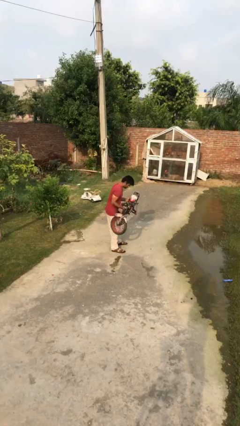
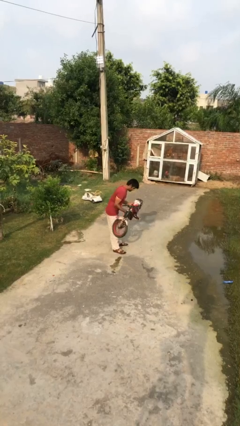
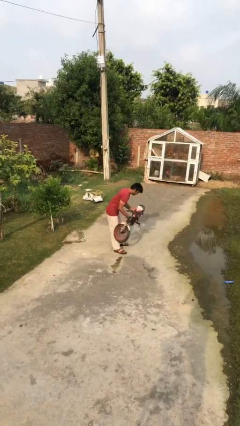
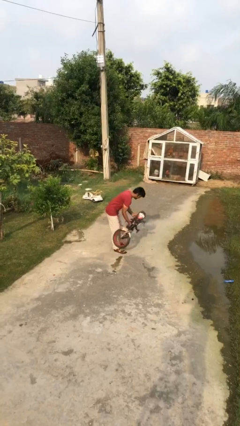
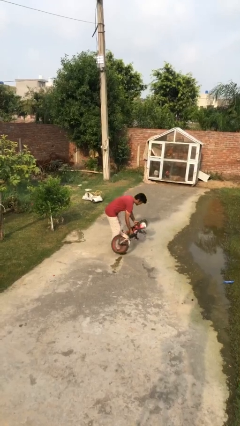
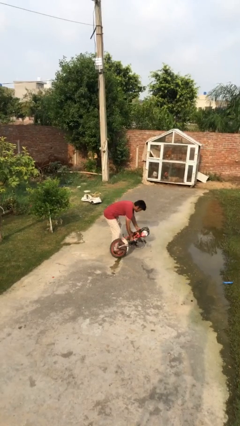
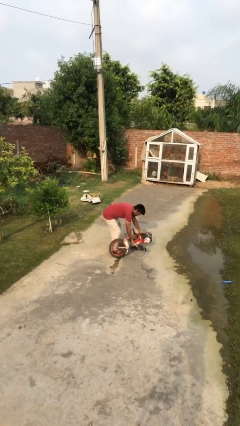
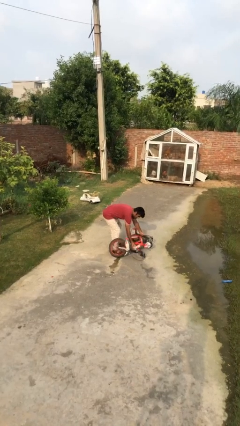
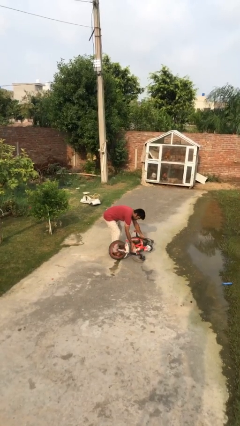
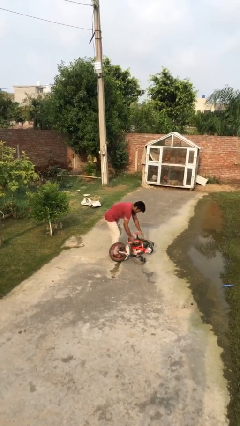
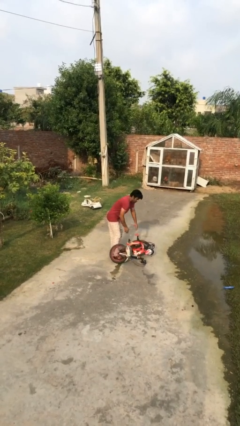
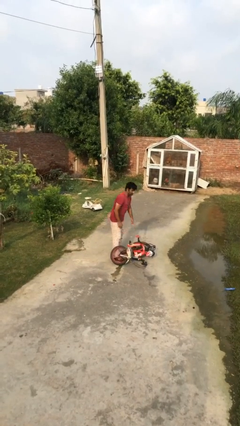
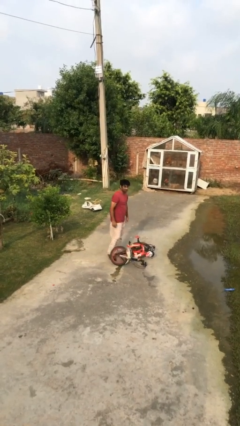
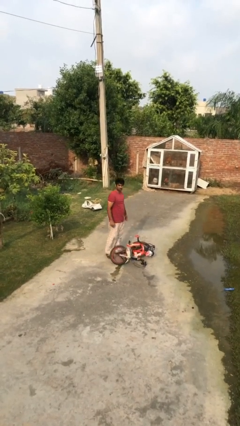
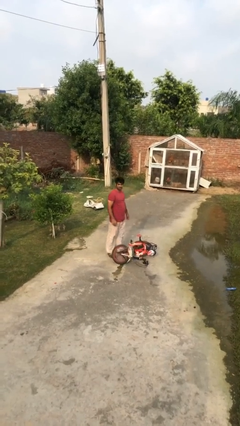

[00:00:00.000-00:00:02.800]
person puts down object on floor

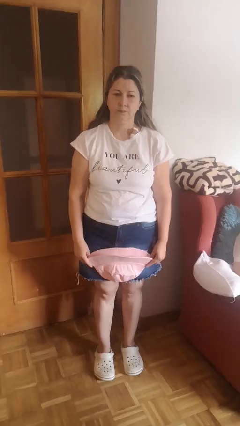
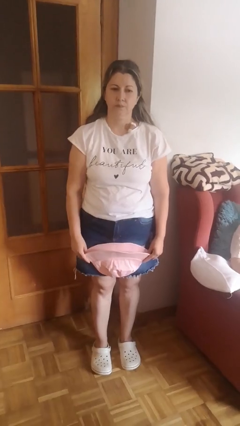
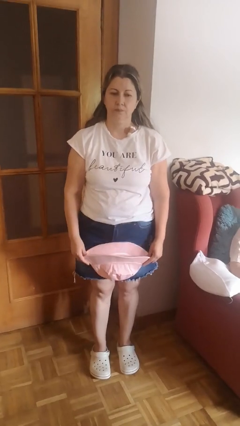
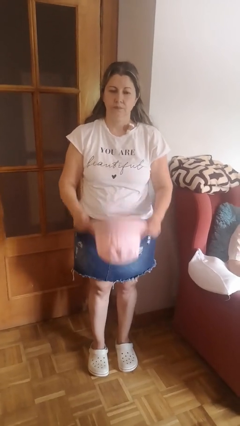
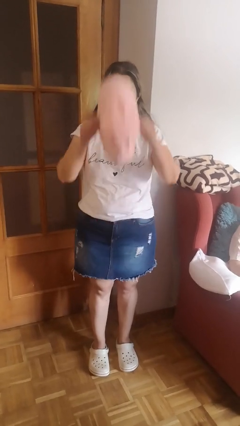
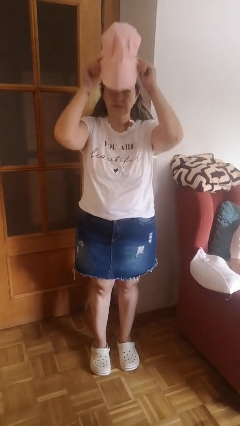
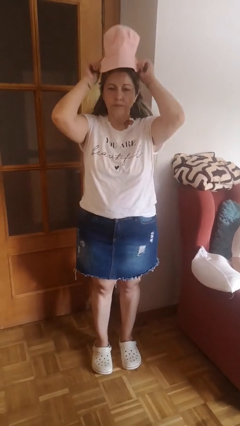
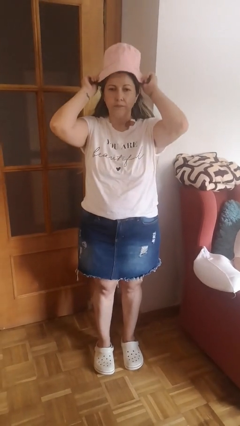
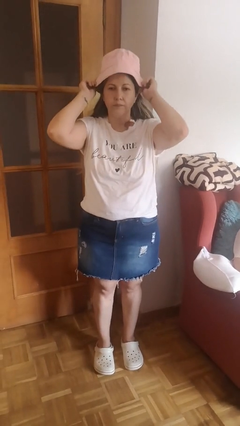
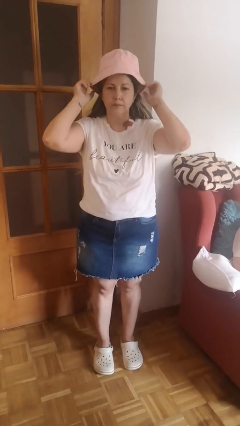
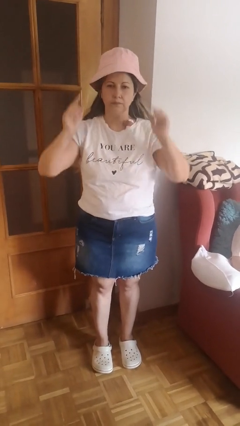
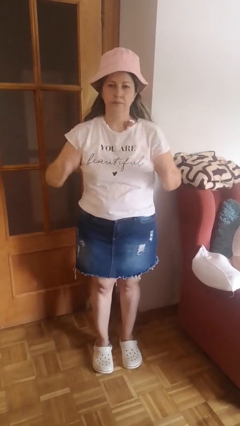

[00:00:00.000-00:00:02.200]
person puts on hat

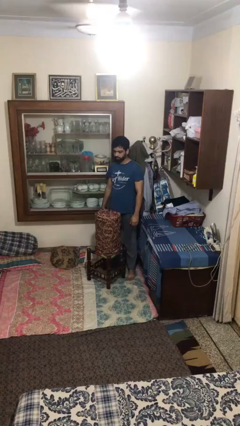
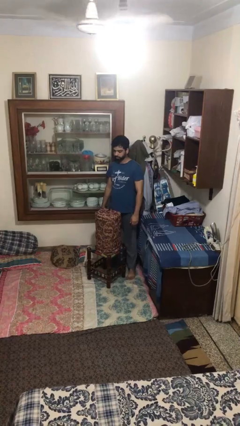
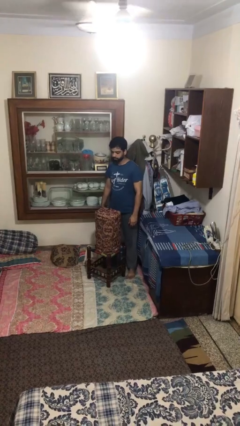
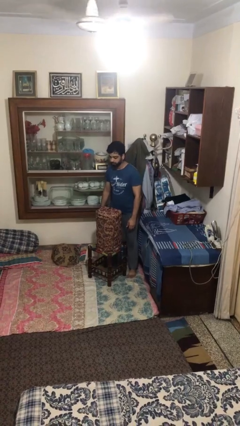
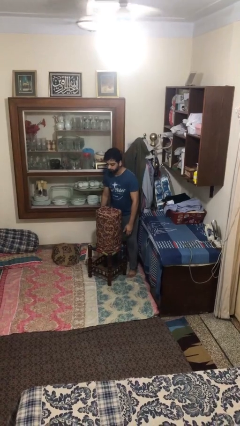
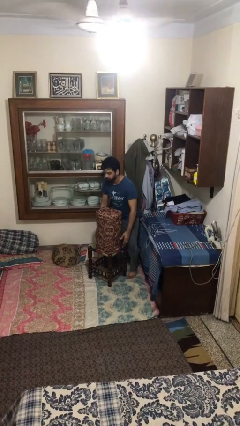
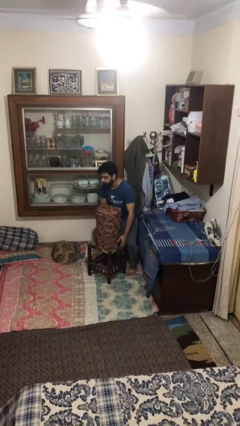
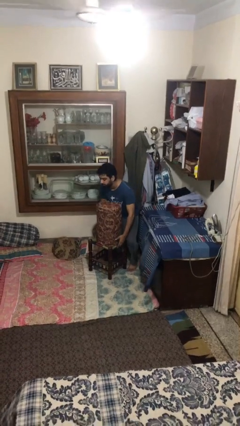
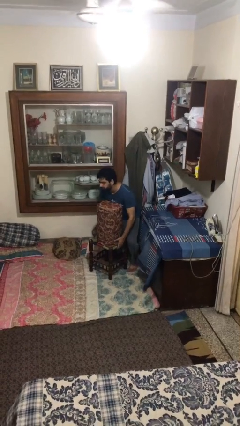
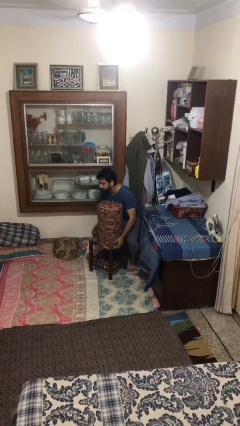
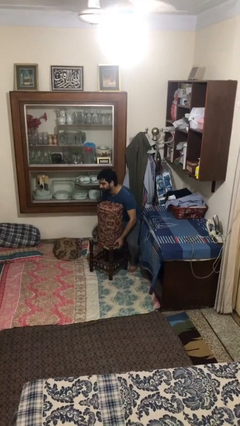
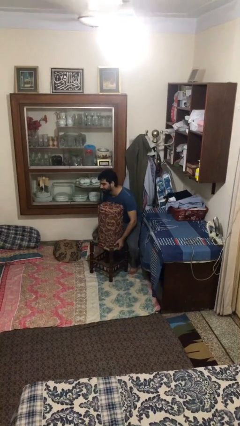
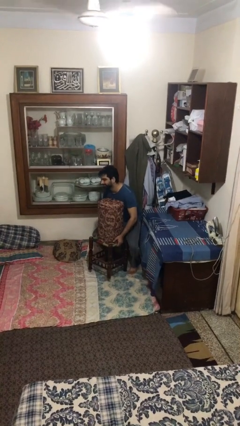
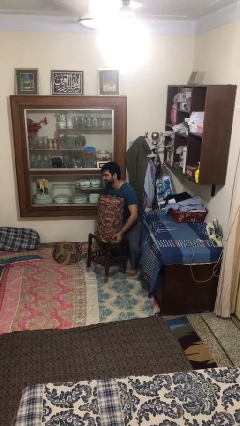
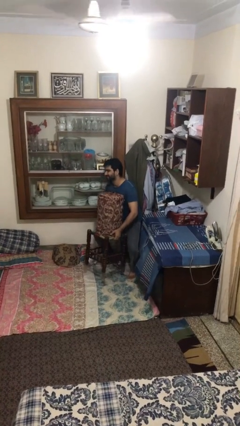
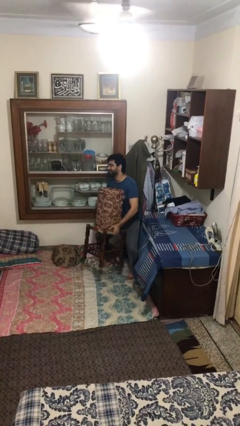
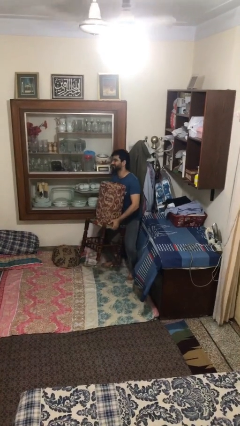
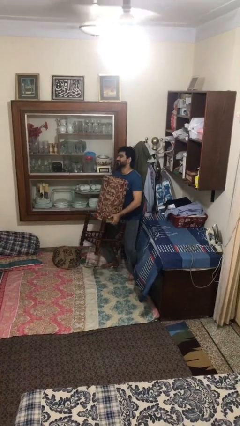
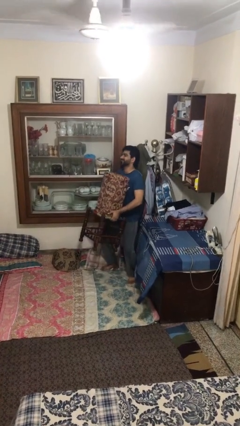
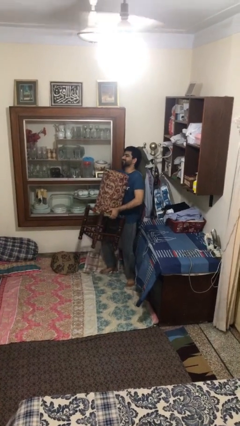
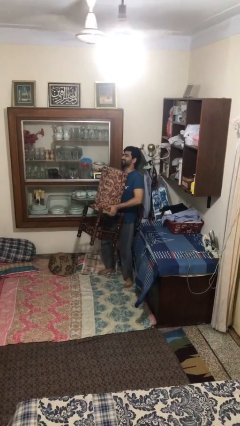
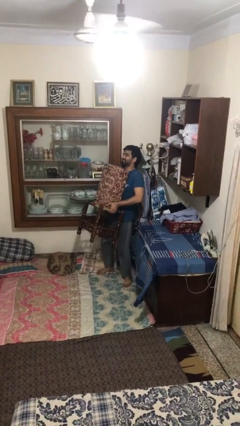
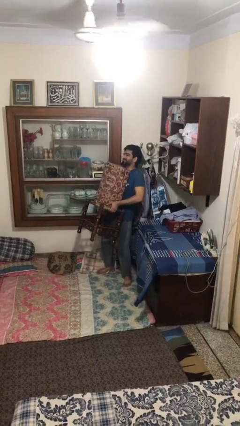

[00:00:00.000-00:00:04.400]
person picks up object from floor

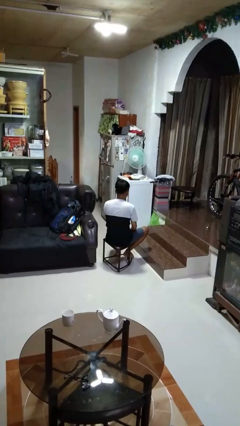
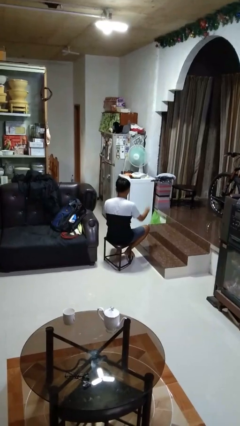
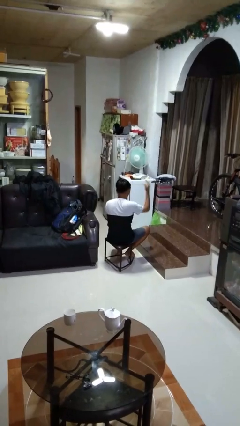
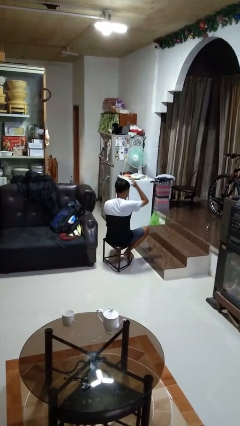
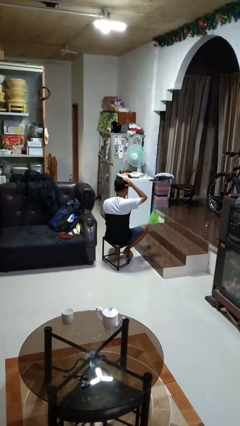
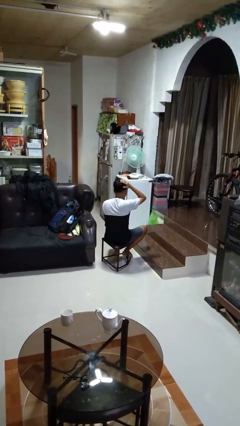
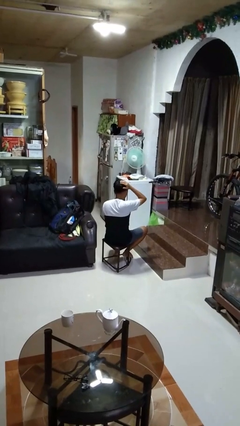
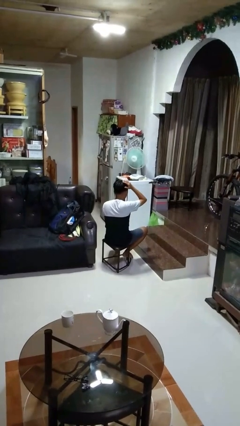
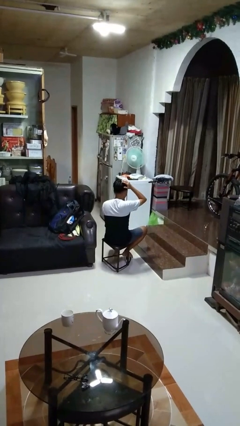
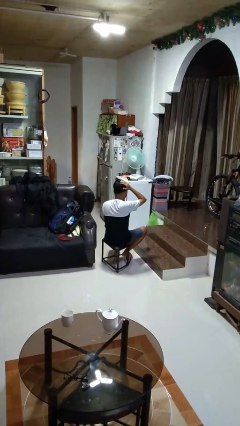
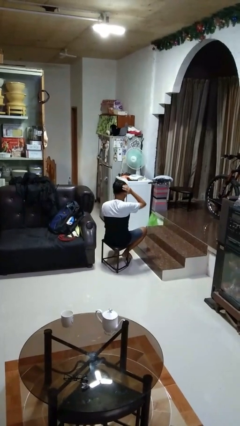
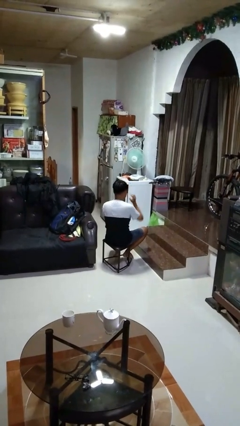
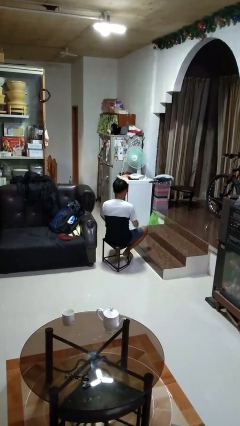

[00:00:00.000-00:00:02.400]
person pats head

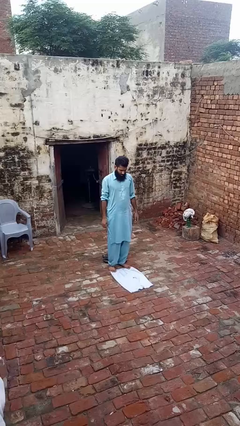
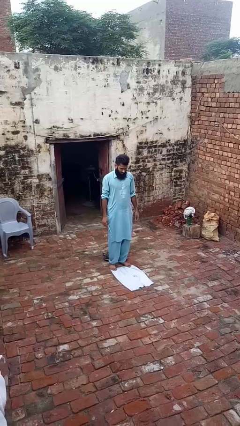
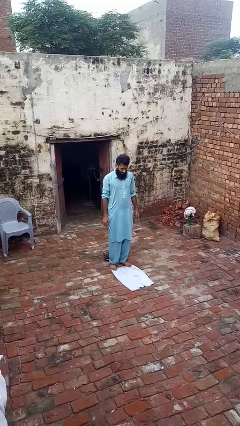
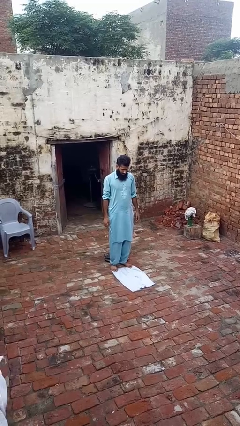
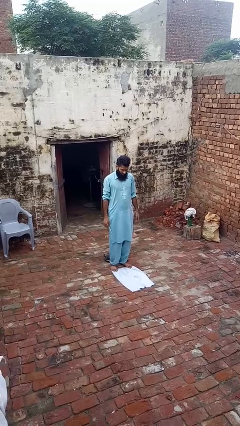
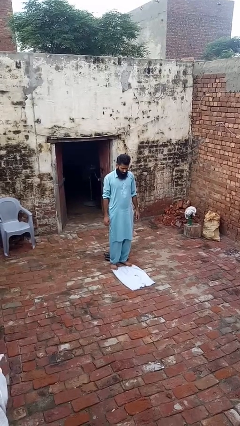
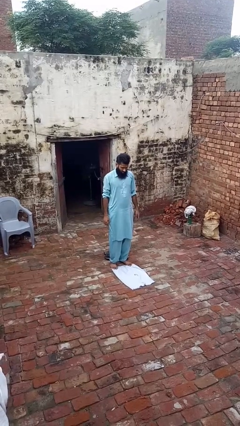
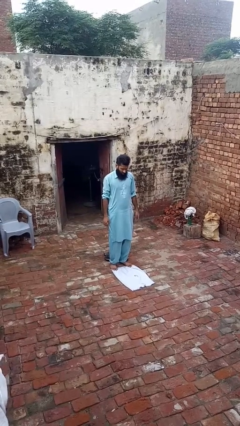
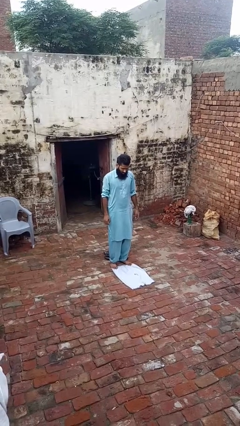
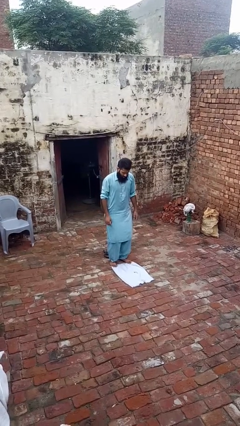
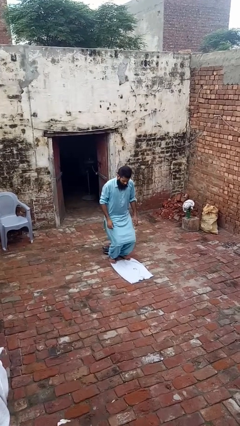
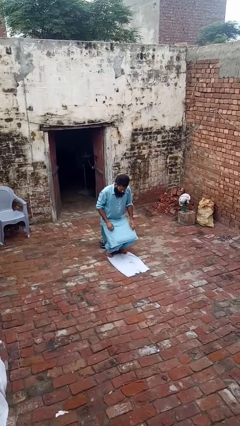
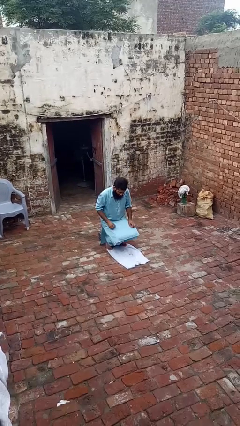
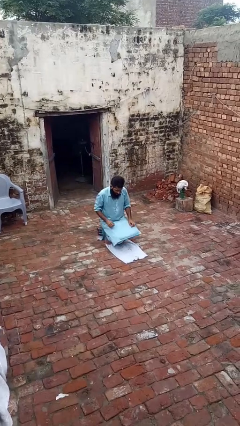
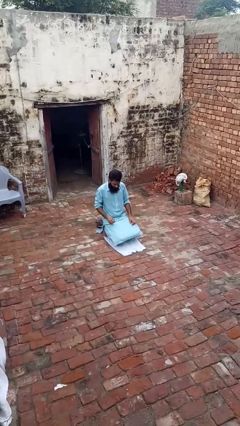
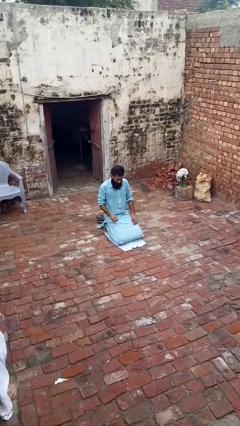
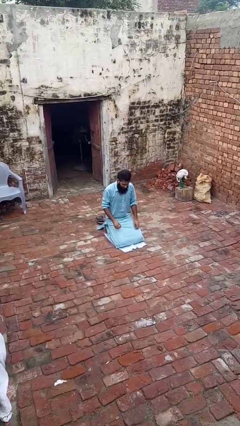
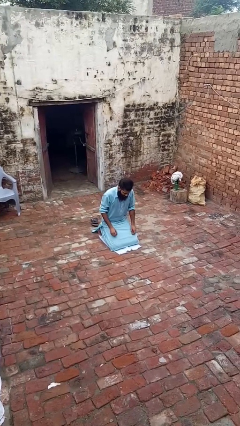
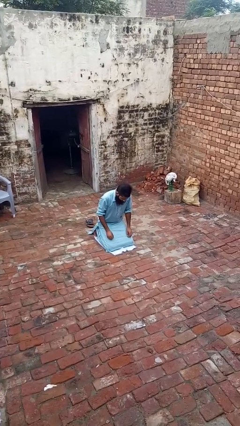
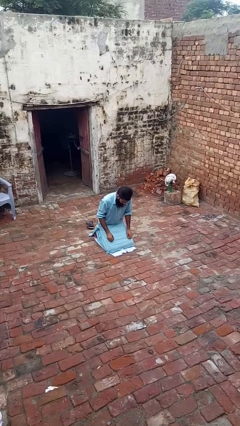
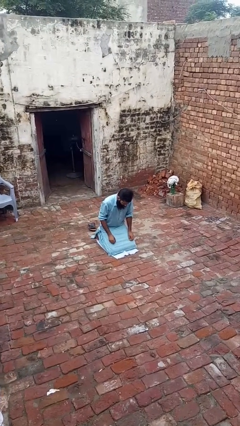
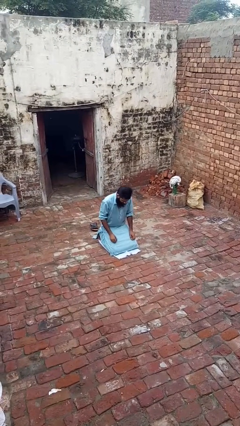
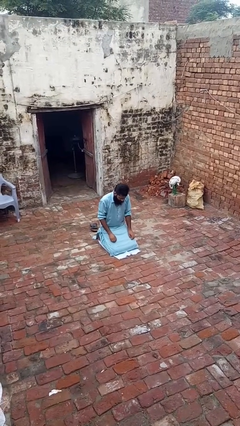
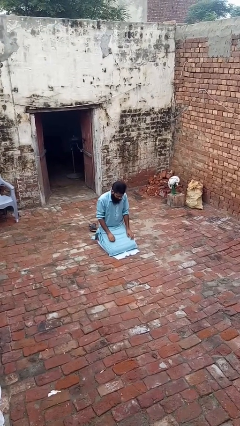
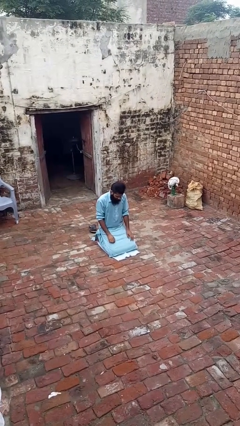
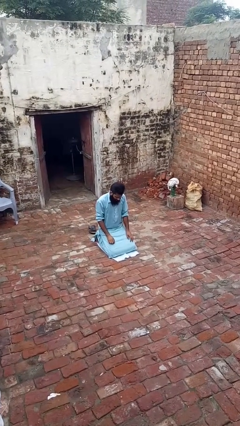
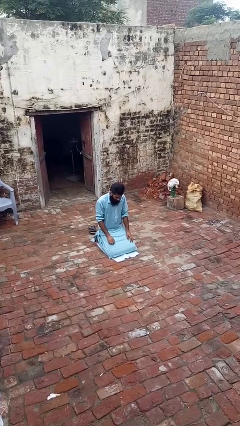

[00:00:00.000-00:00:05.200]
person squats

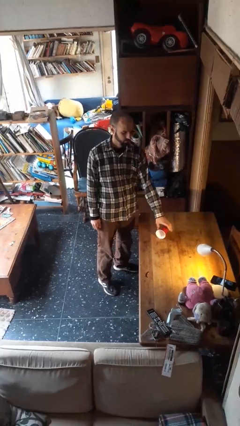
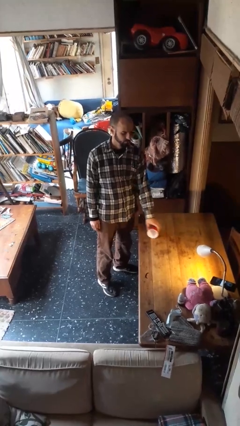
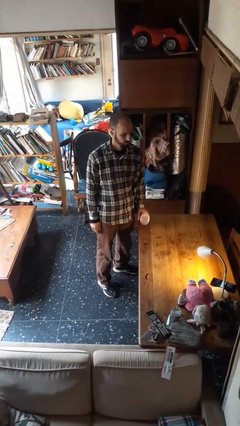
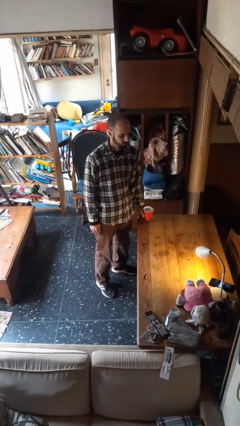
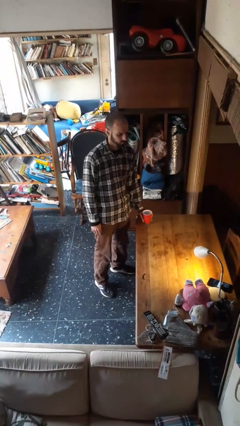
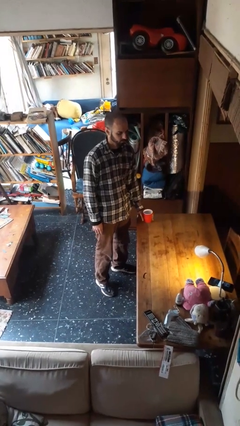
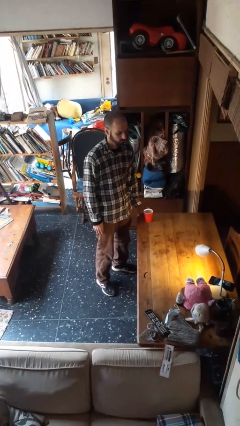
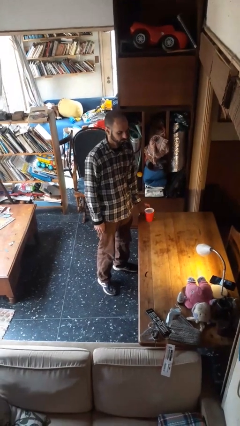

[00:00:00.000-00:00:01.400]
person sets upright glass
